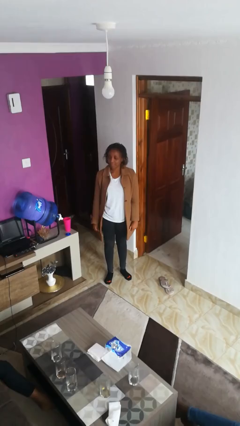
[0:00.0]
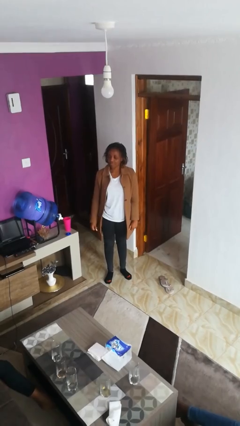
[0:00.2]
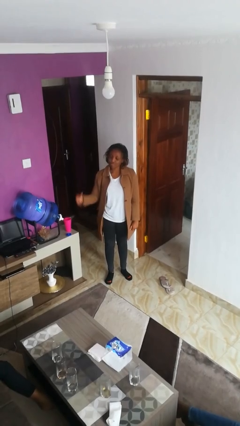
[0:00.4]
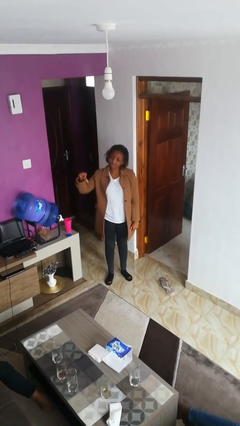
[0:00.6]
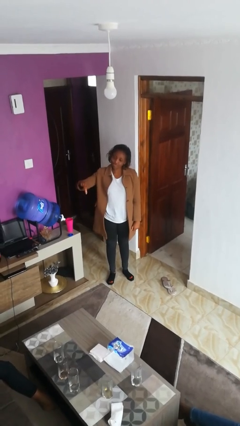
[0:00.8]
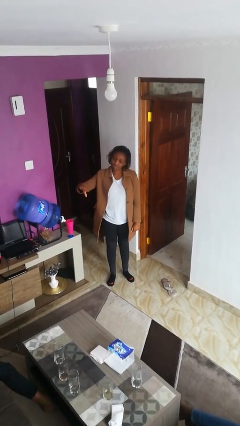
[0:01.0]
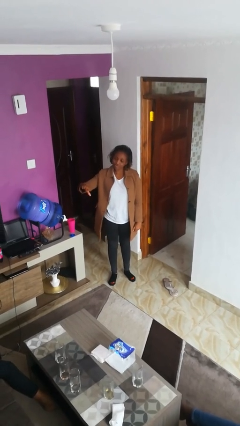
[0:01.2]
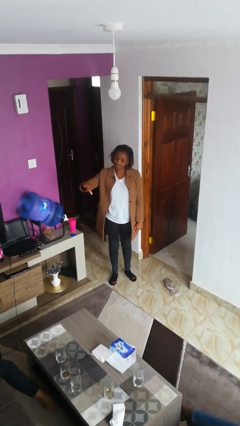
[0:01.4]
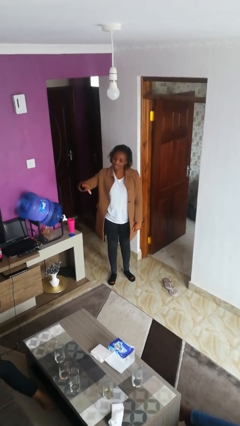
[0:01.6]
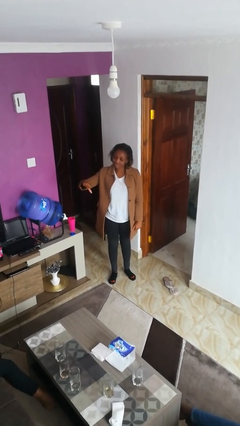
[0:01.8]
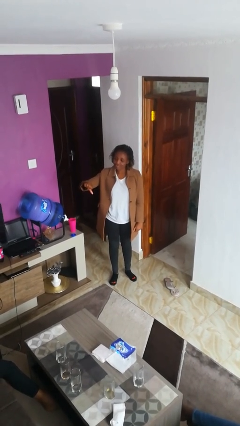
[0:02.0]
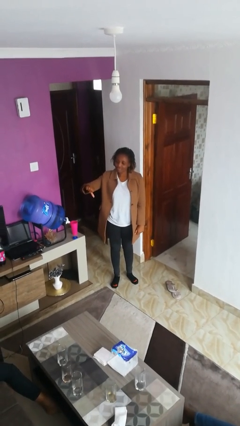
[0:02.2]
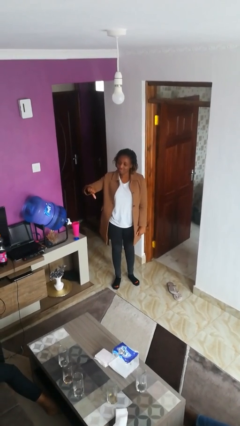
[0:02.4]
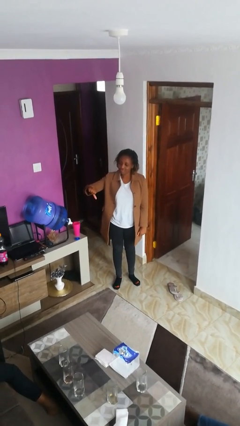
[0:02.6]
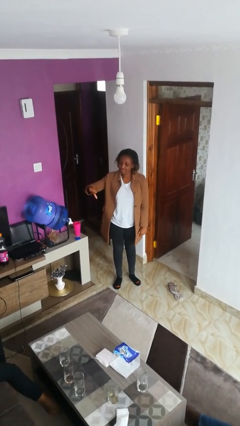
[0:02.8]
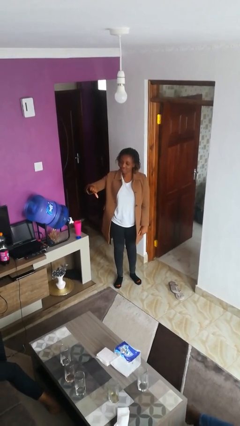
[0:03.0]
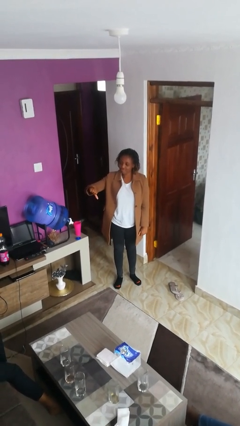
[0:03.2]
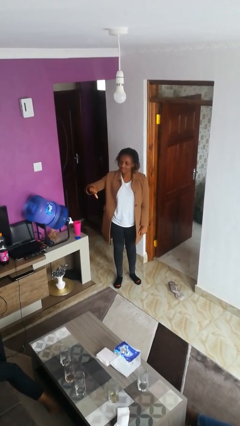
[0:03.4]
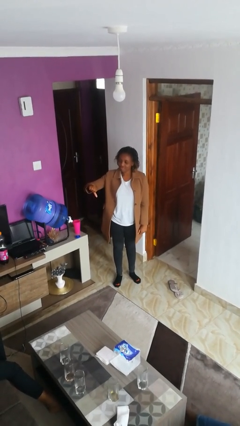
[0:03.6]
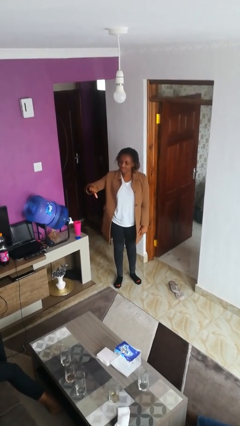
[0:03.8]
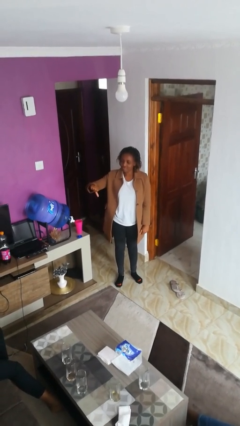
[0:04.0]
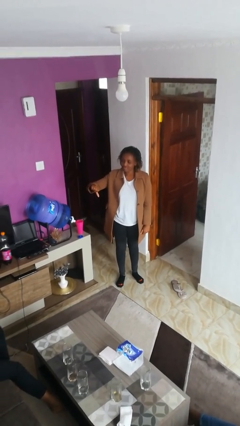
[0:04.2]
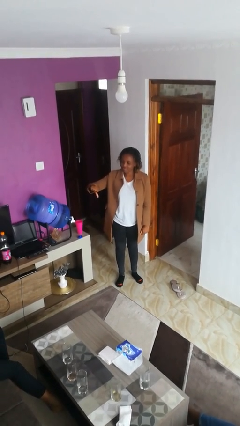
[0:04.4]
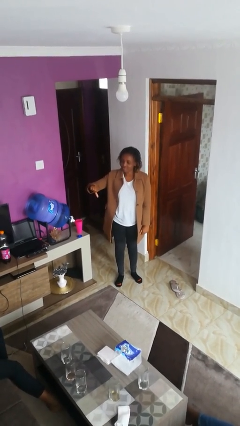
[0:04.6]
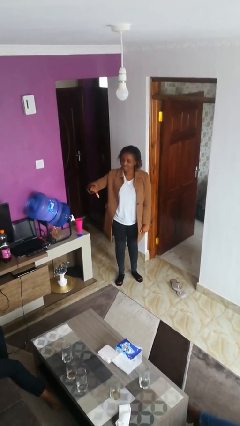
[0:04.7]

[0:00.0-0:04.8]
person gestures thumbs down

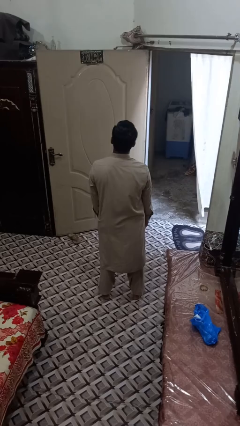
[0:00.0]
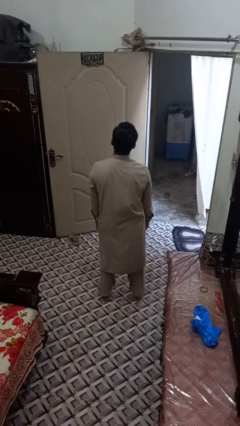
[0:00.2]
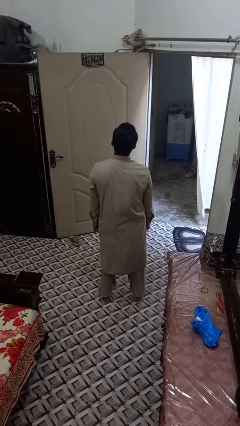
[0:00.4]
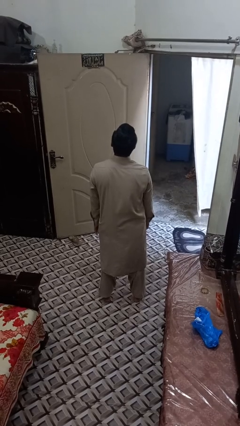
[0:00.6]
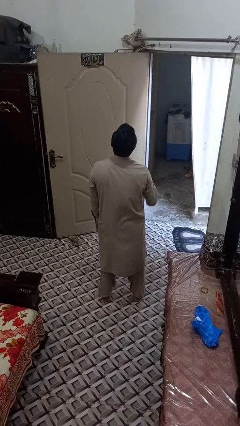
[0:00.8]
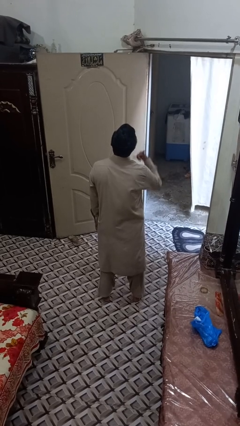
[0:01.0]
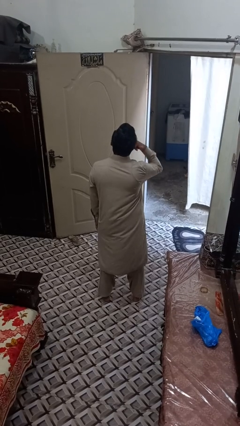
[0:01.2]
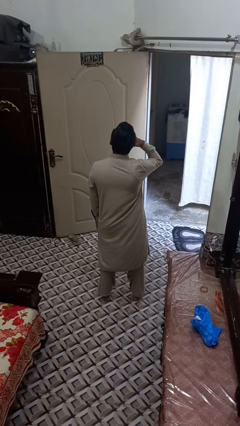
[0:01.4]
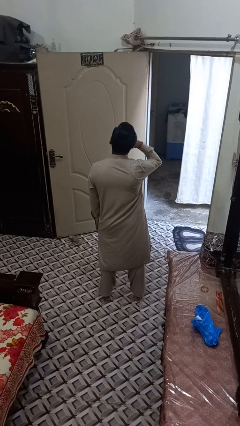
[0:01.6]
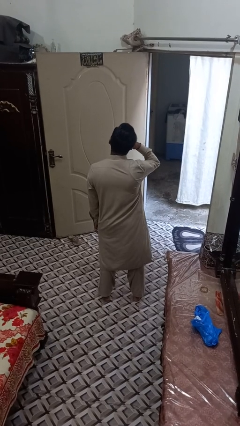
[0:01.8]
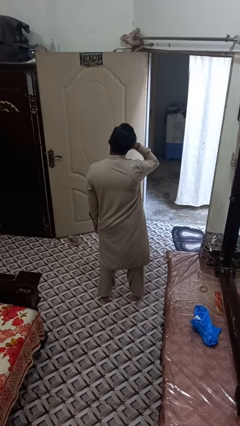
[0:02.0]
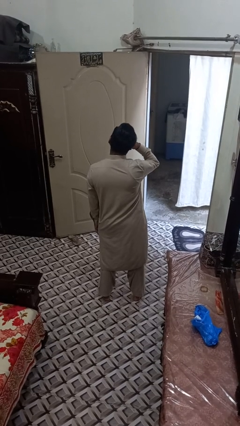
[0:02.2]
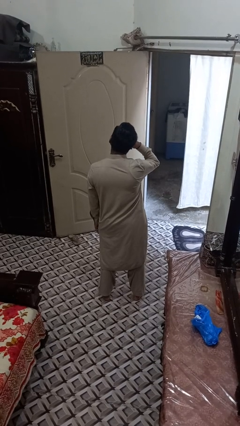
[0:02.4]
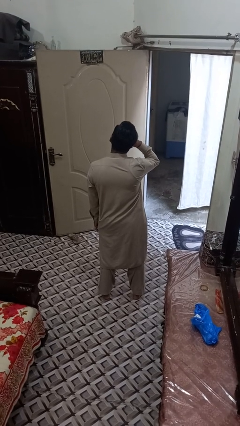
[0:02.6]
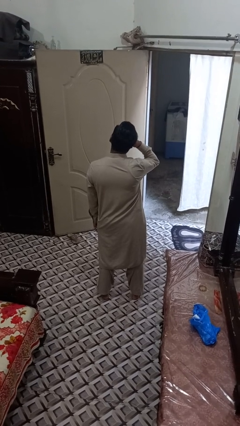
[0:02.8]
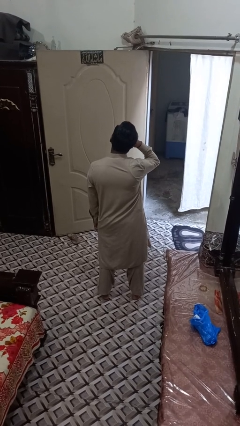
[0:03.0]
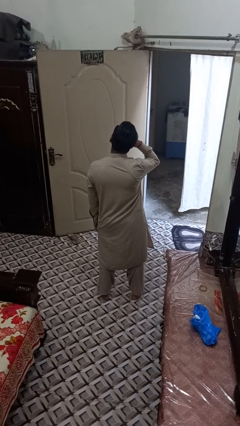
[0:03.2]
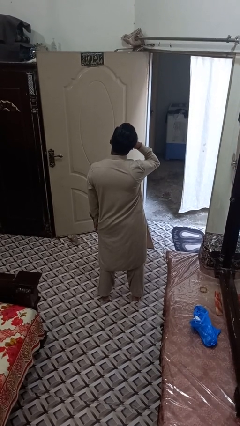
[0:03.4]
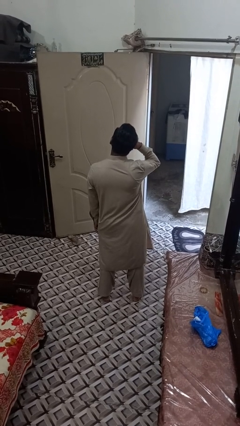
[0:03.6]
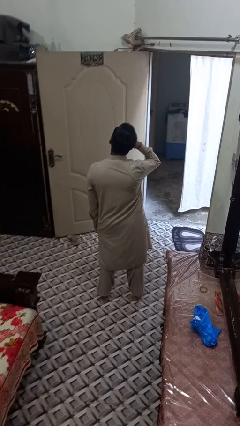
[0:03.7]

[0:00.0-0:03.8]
person gestures call me

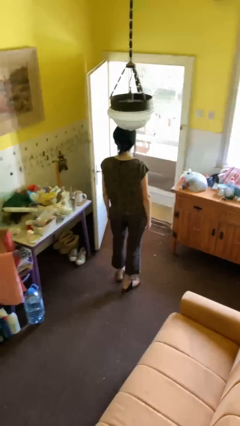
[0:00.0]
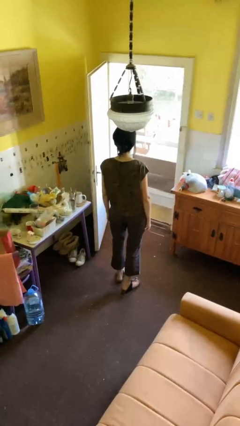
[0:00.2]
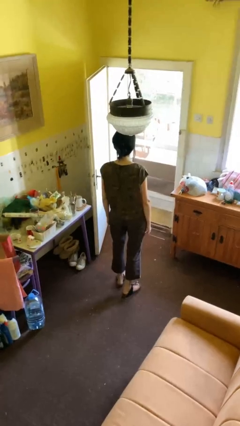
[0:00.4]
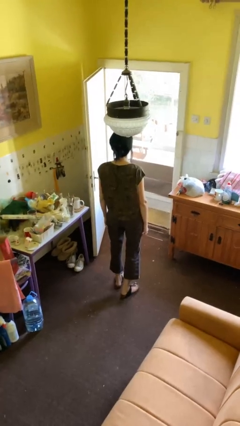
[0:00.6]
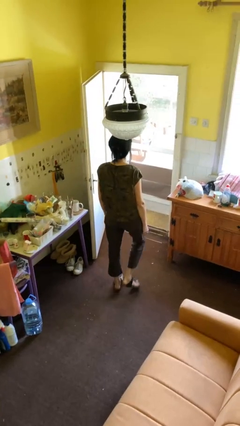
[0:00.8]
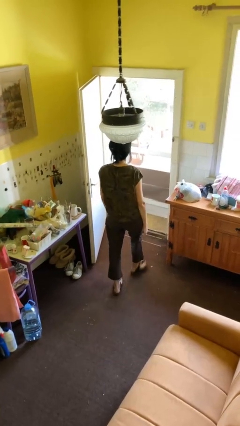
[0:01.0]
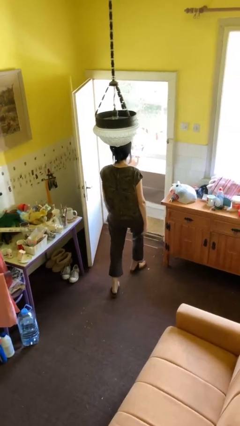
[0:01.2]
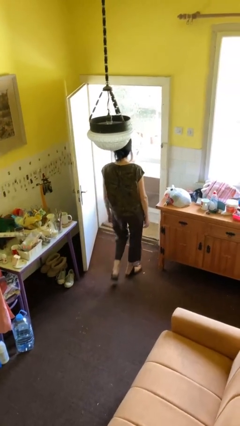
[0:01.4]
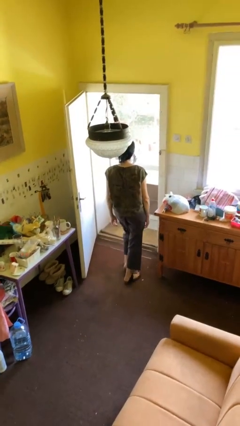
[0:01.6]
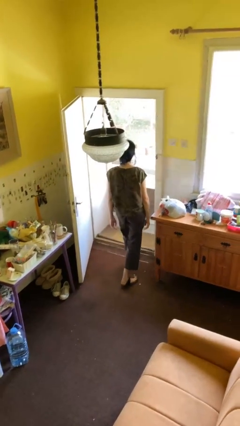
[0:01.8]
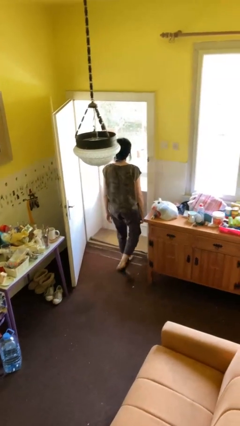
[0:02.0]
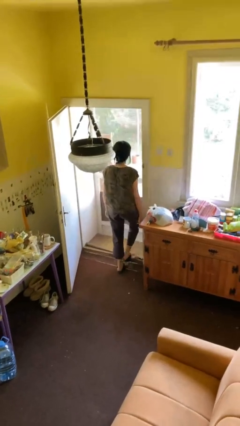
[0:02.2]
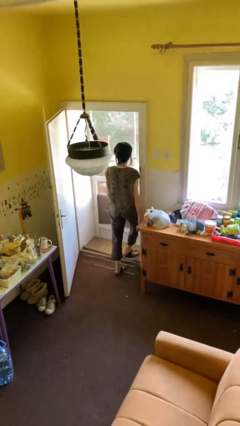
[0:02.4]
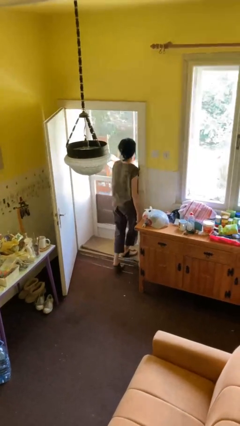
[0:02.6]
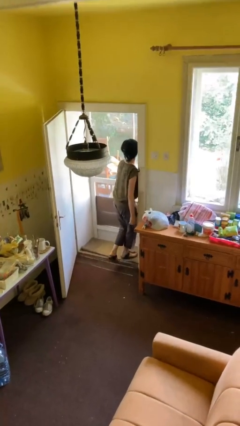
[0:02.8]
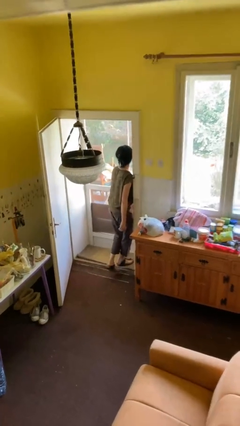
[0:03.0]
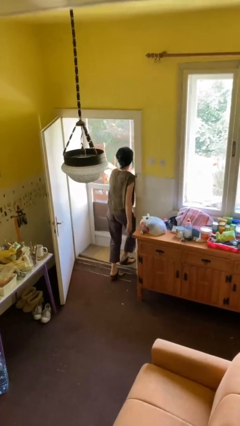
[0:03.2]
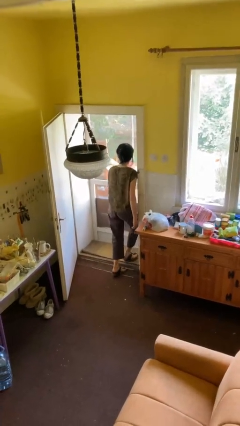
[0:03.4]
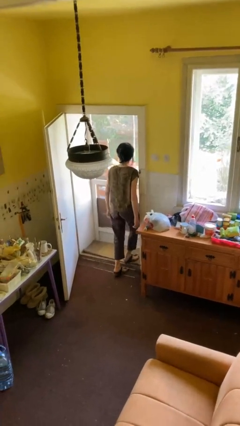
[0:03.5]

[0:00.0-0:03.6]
person bumps into wall

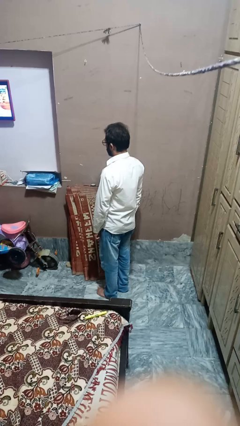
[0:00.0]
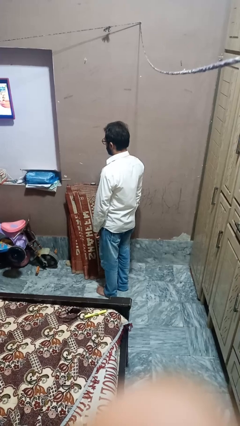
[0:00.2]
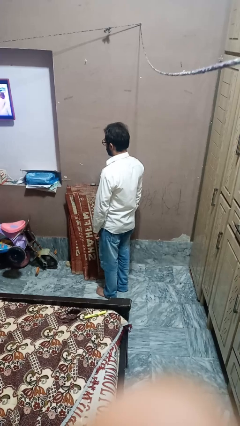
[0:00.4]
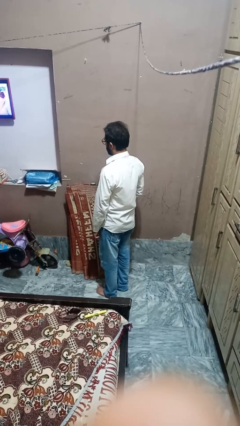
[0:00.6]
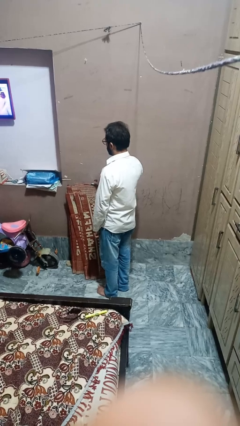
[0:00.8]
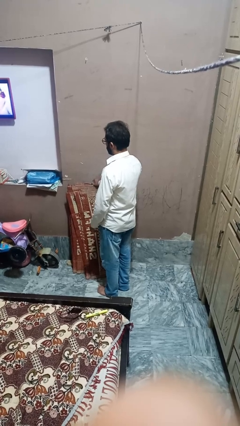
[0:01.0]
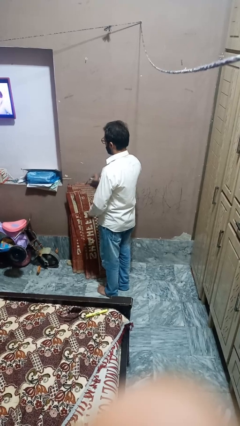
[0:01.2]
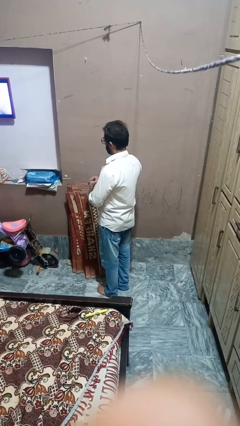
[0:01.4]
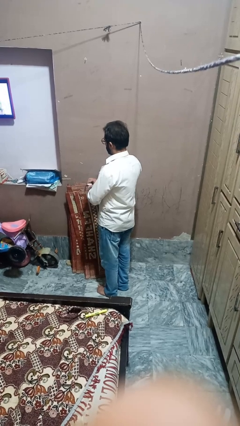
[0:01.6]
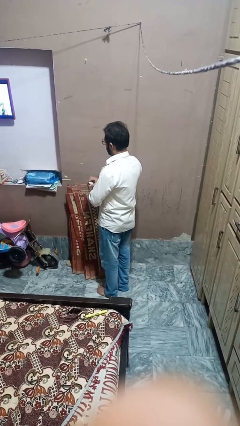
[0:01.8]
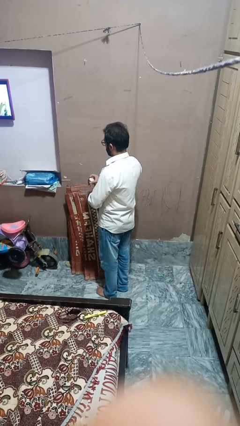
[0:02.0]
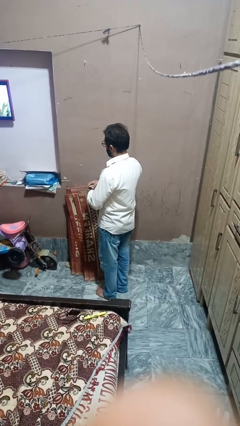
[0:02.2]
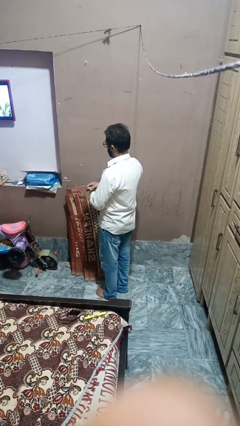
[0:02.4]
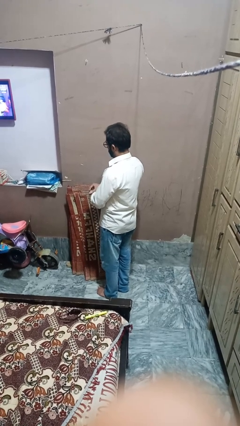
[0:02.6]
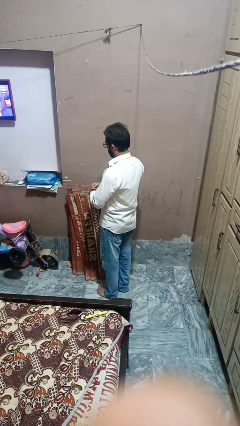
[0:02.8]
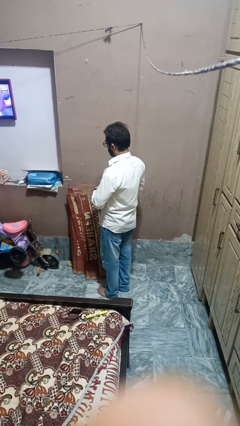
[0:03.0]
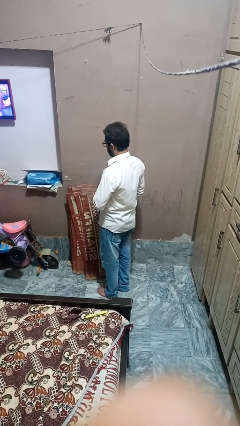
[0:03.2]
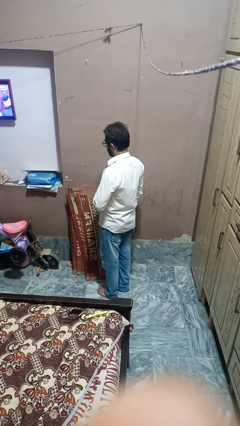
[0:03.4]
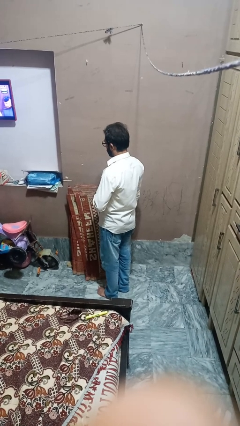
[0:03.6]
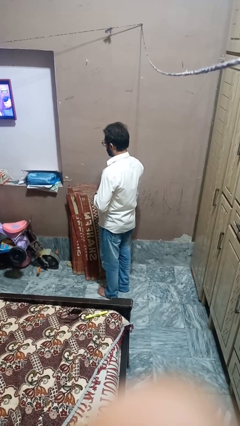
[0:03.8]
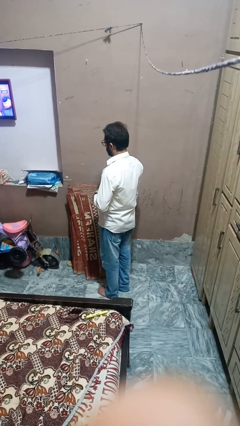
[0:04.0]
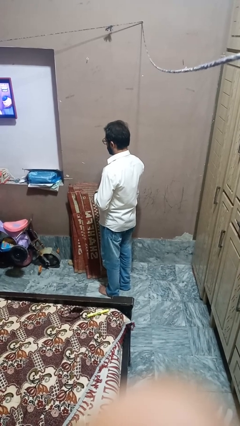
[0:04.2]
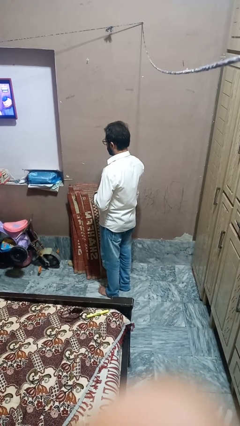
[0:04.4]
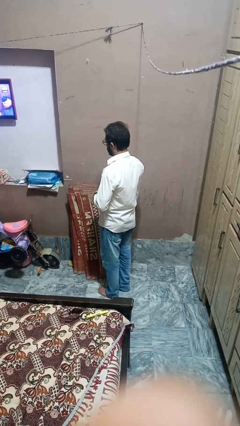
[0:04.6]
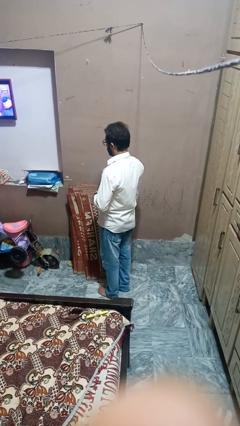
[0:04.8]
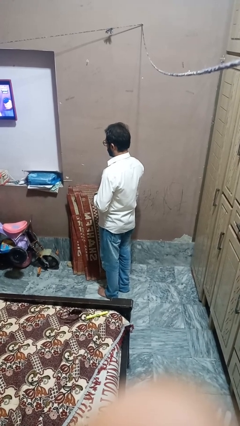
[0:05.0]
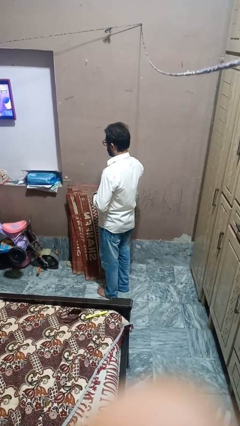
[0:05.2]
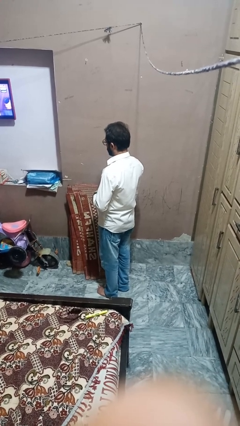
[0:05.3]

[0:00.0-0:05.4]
person puts on wristwatch
